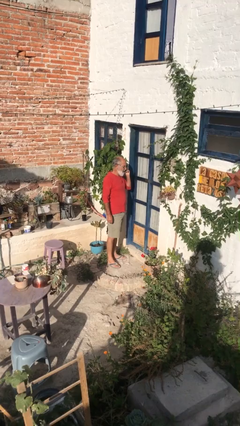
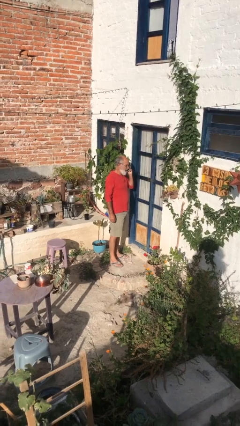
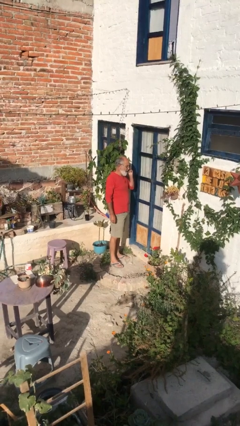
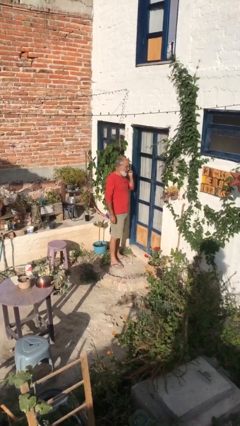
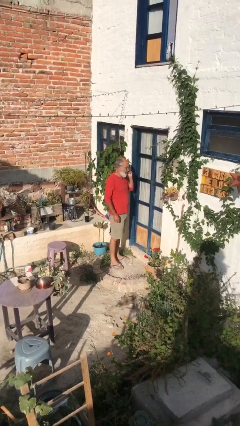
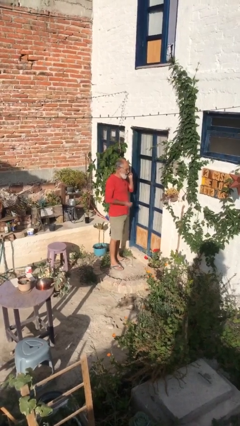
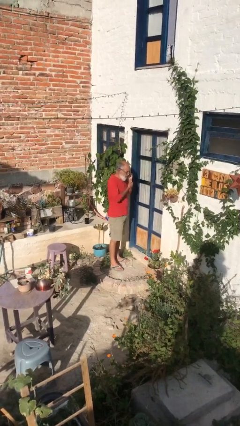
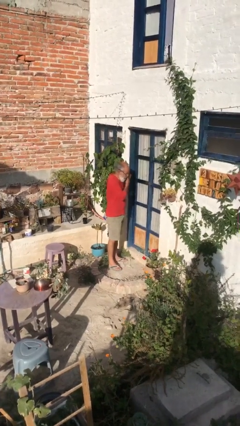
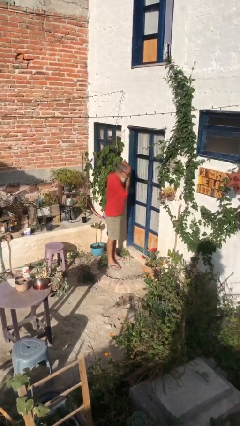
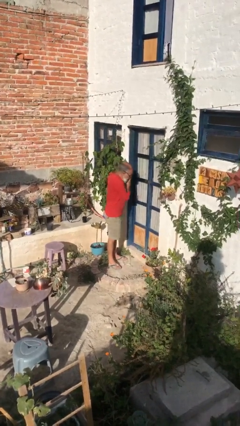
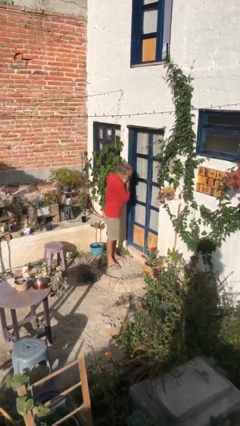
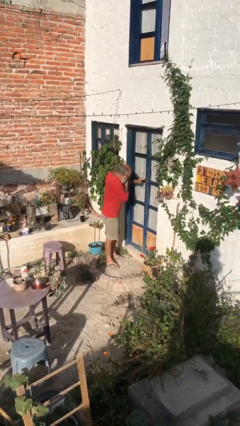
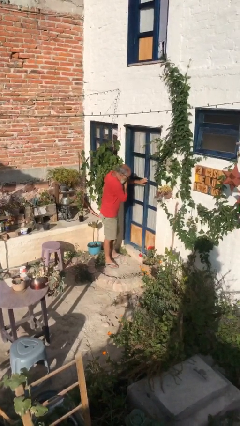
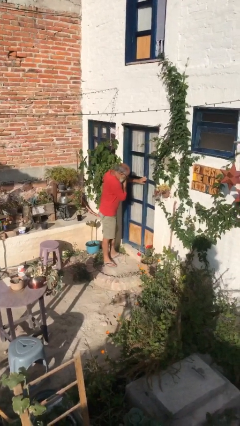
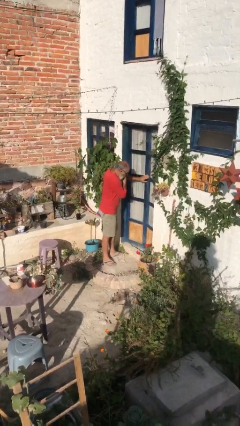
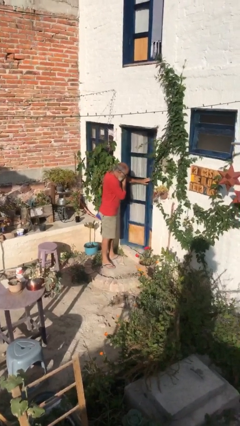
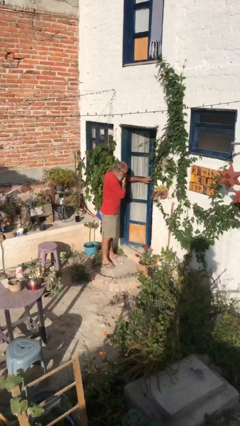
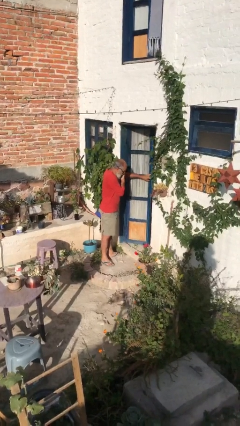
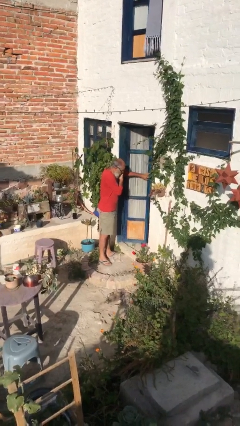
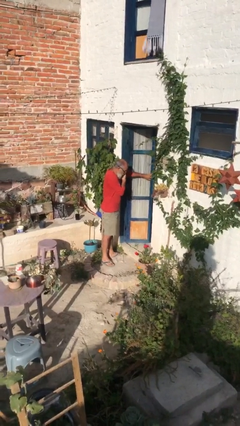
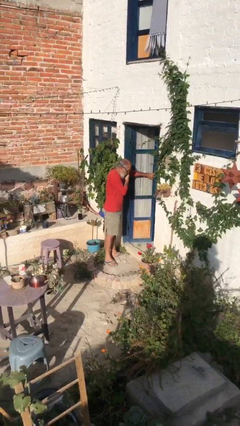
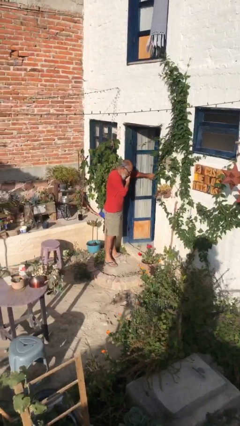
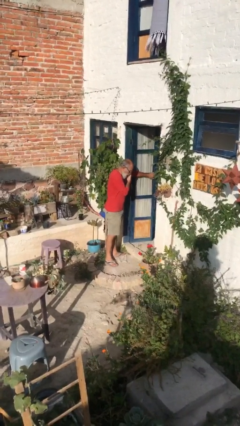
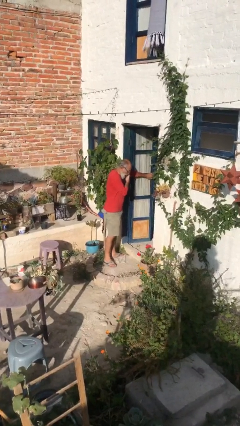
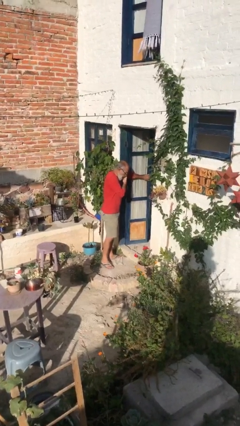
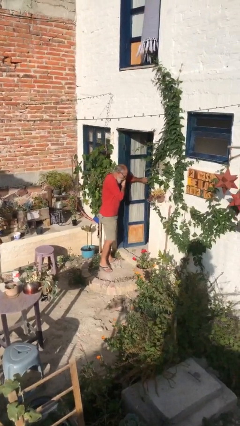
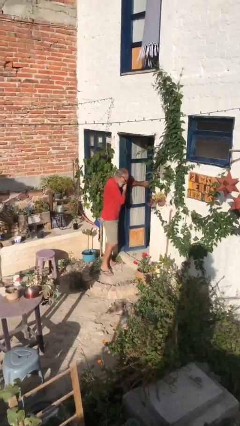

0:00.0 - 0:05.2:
person opens facility door

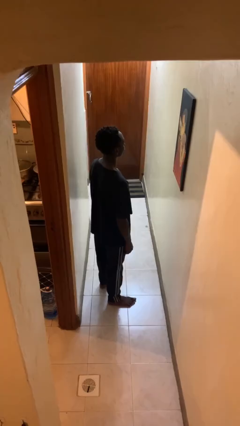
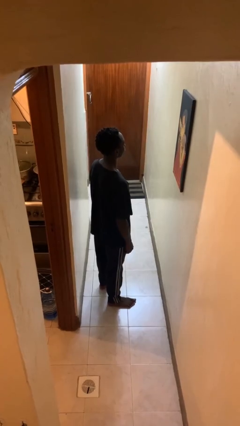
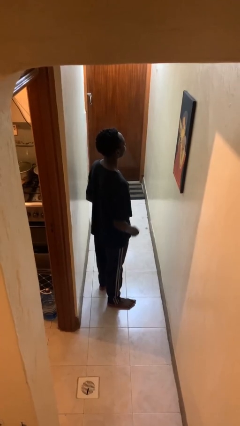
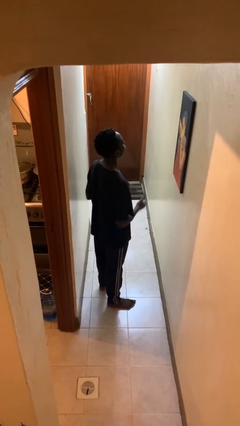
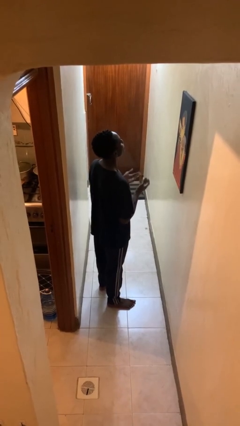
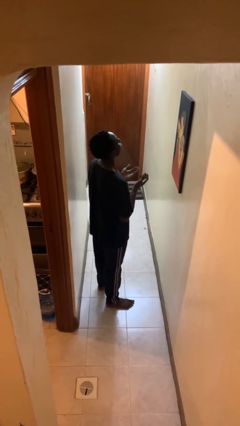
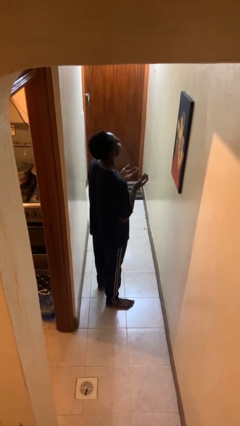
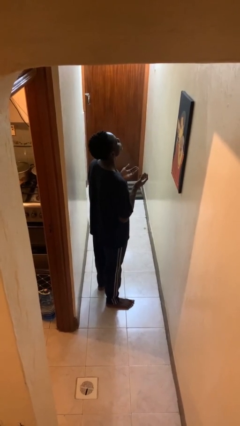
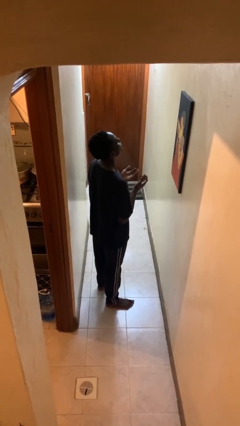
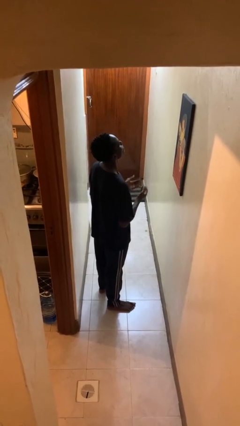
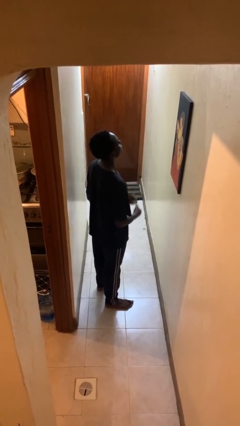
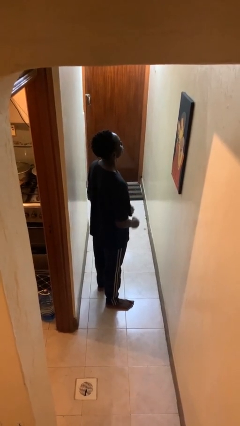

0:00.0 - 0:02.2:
person prays

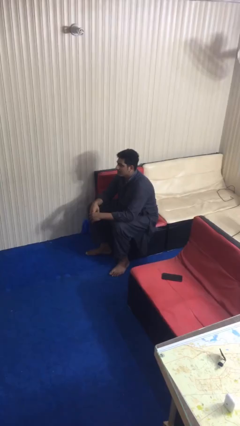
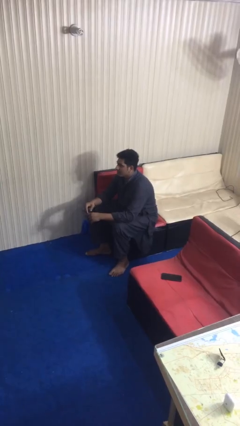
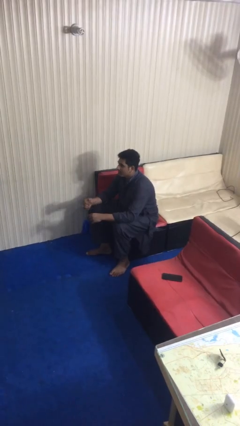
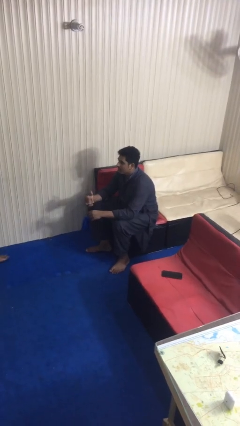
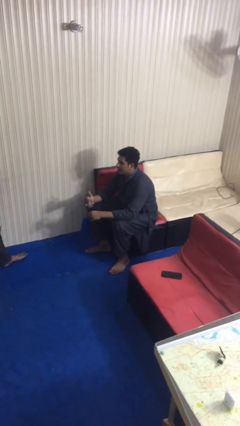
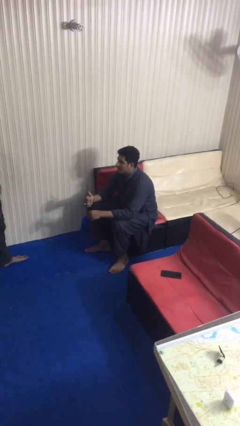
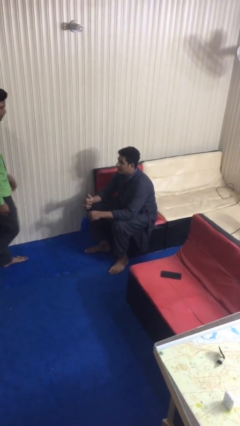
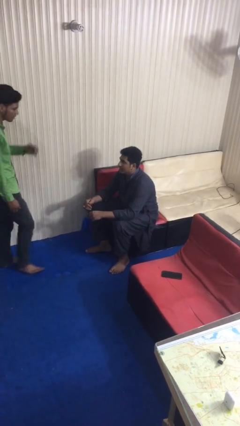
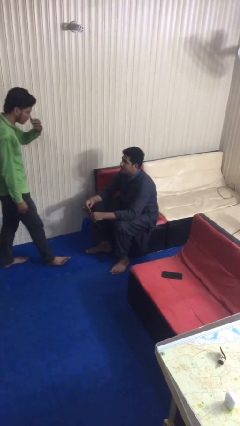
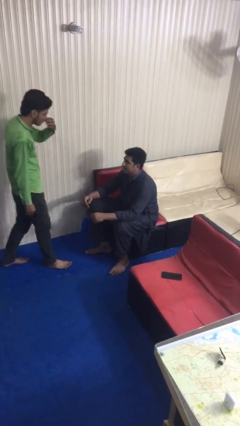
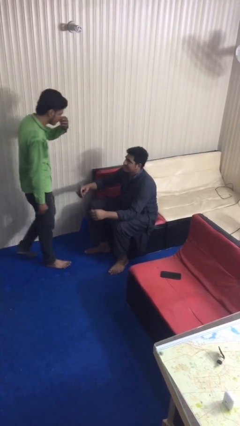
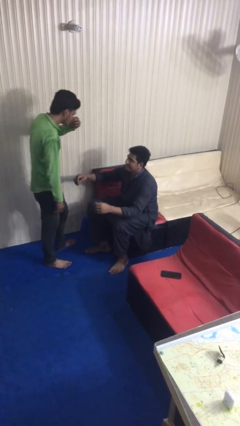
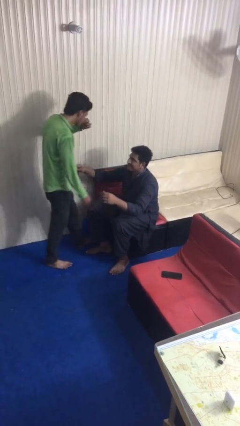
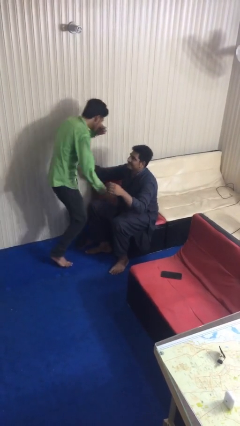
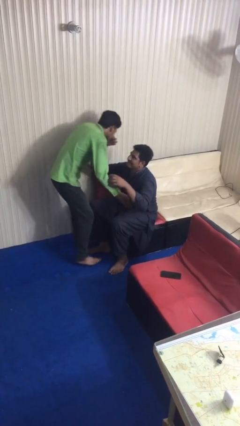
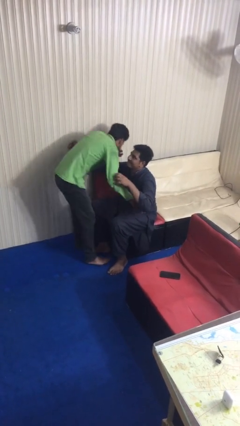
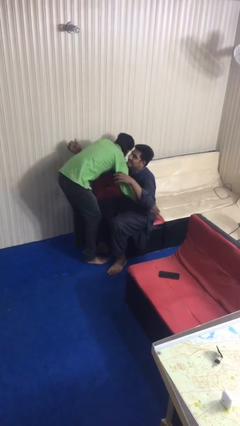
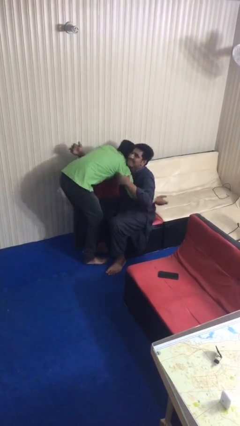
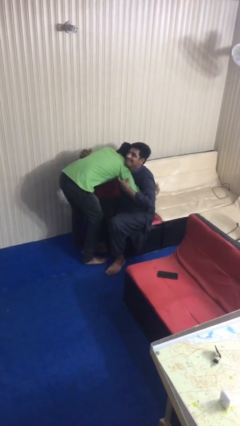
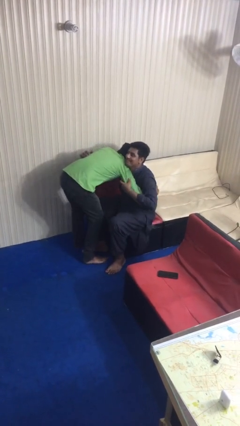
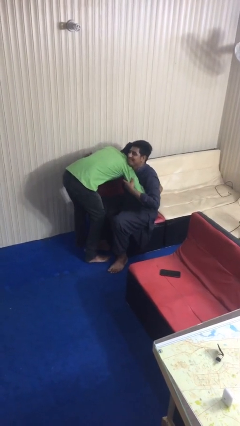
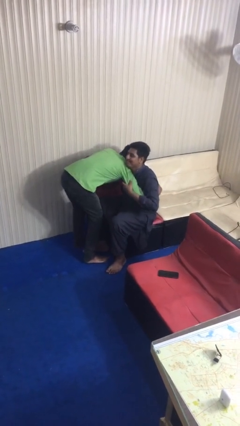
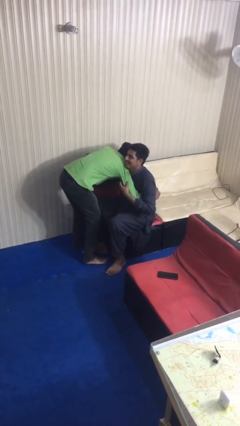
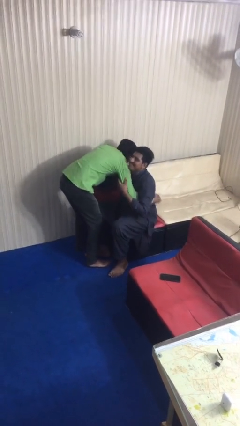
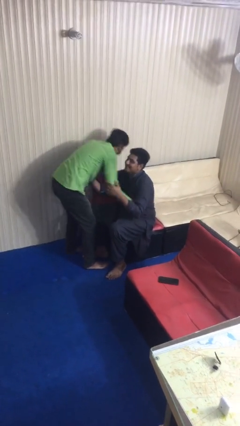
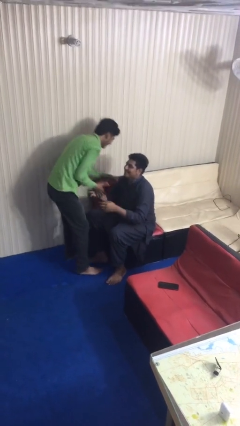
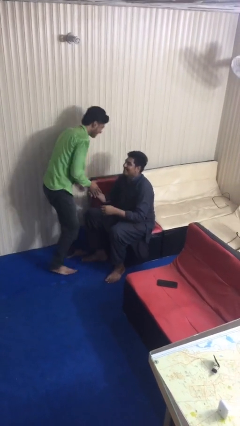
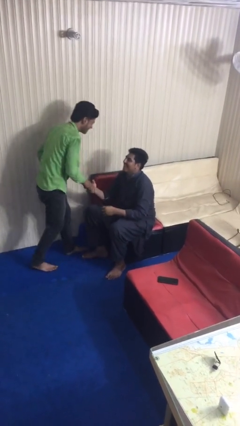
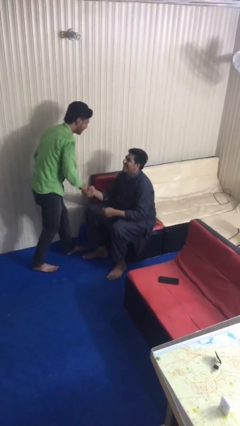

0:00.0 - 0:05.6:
person embraces person

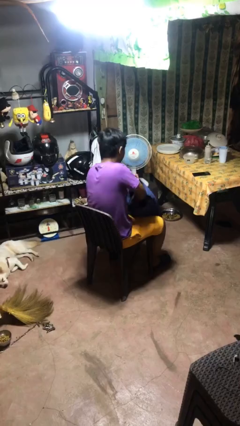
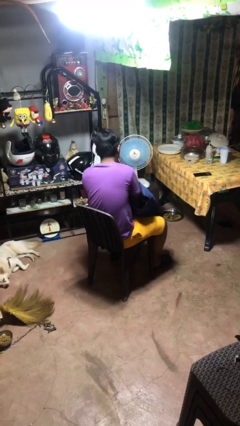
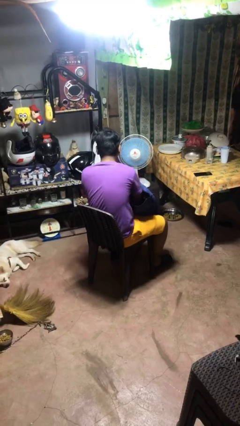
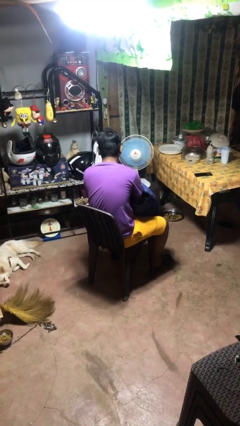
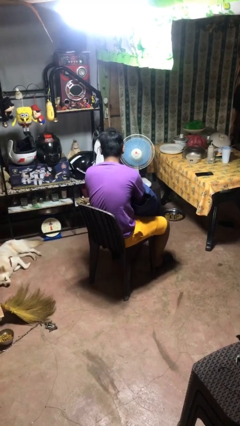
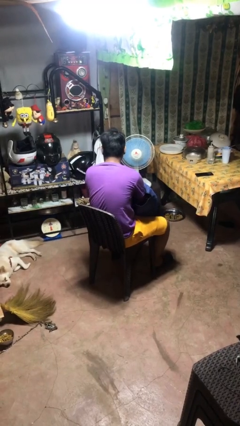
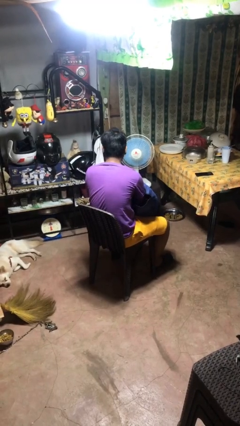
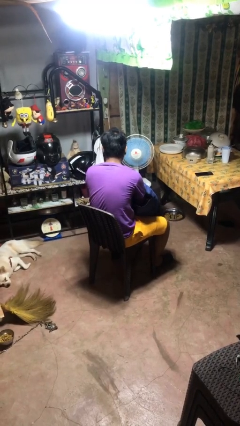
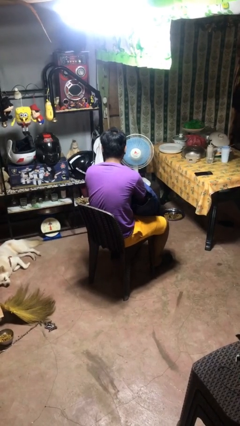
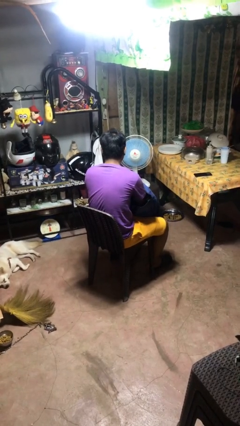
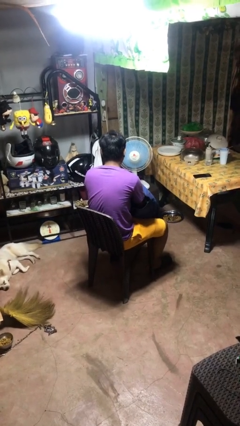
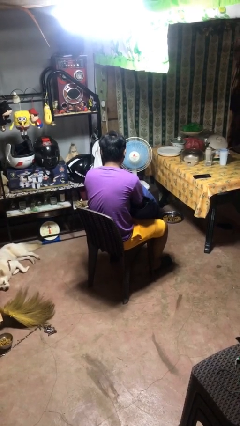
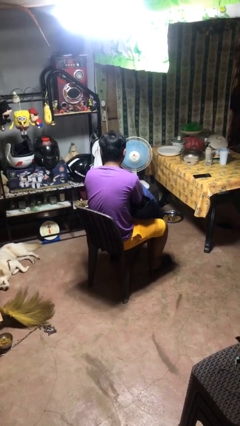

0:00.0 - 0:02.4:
person searches in backpack

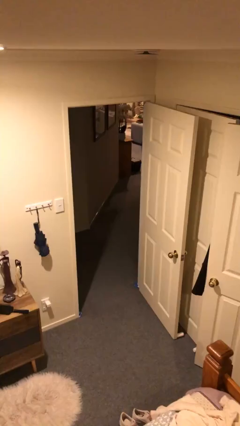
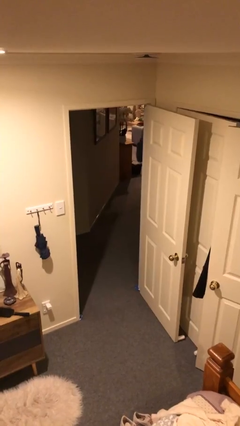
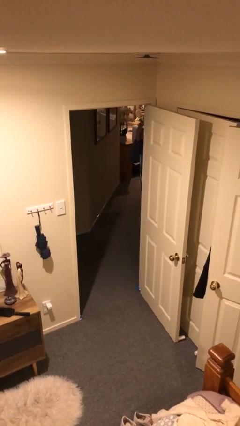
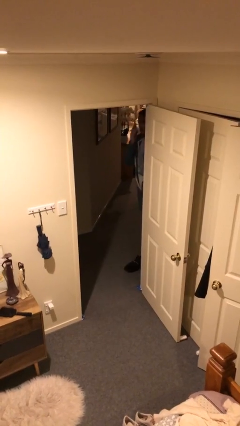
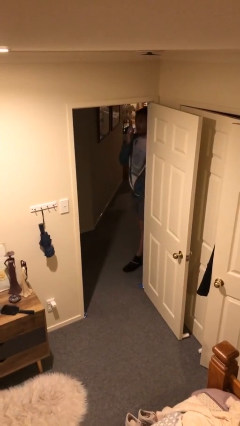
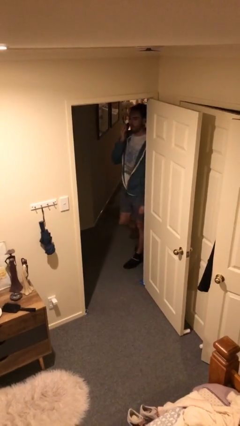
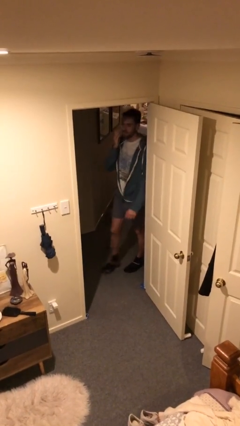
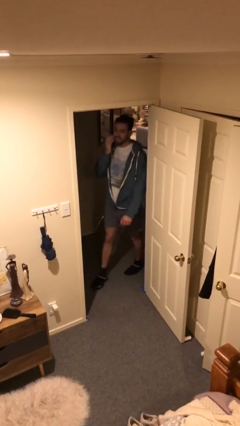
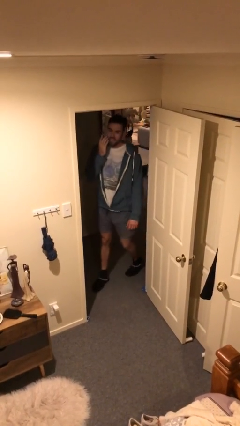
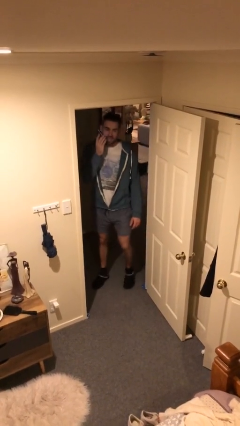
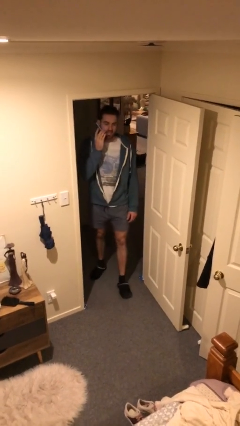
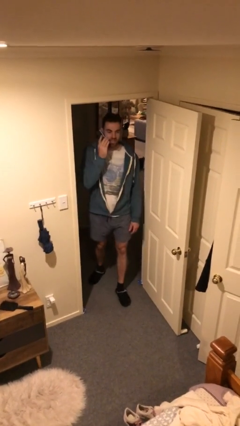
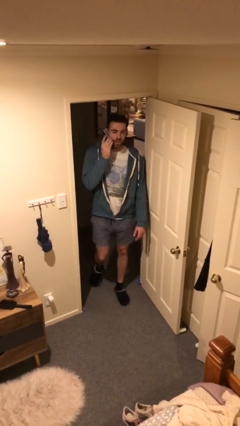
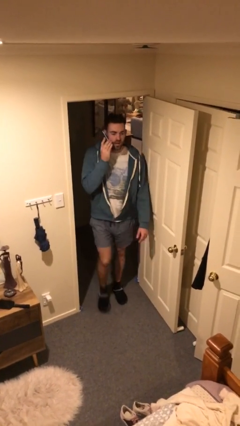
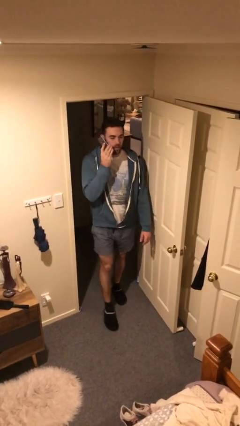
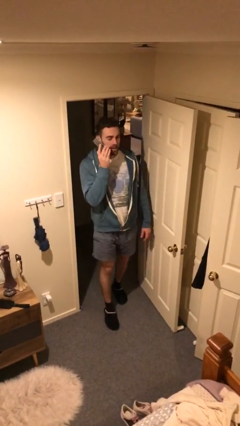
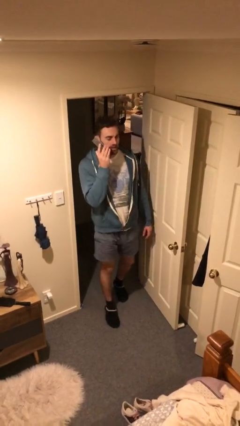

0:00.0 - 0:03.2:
person enters scene through structure
